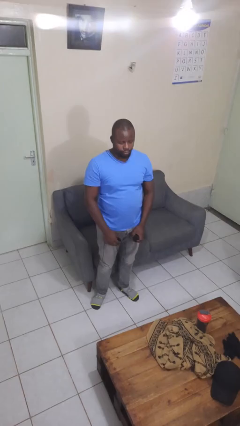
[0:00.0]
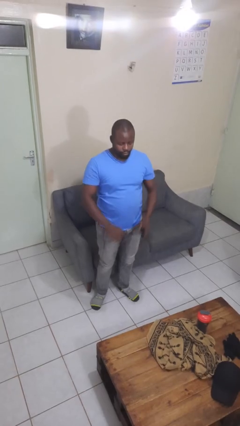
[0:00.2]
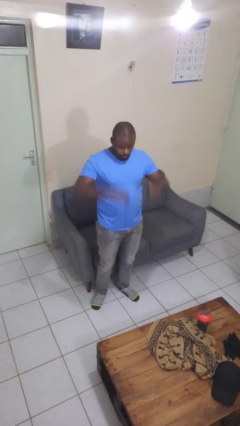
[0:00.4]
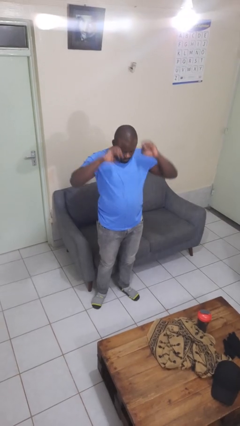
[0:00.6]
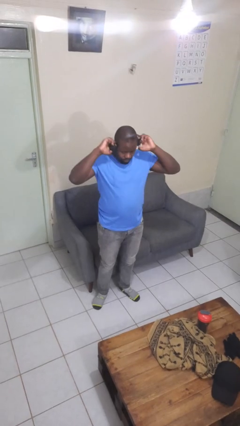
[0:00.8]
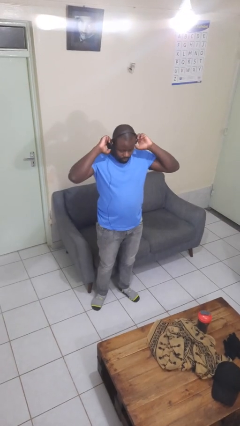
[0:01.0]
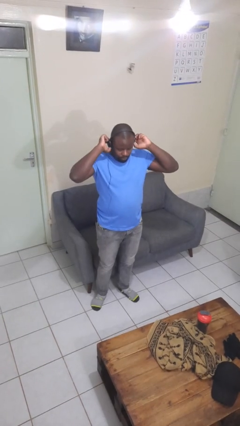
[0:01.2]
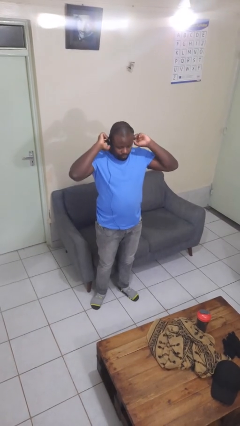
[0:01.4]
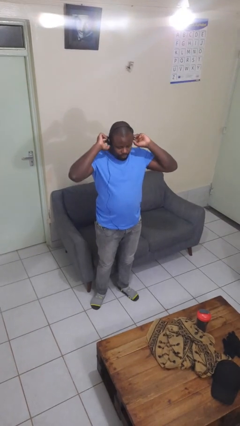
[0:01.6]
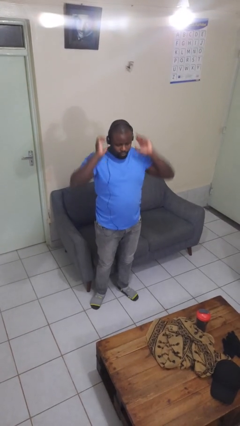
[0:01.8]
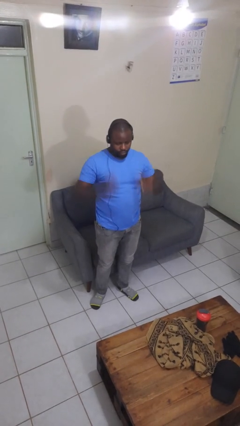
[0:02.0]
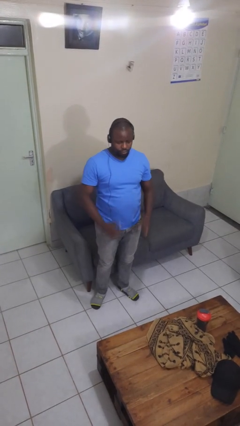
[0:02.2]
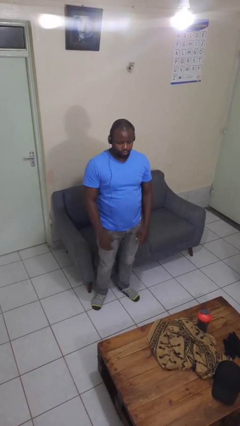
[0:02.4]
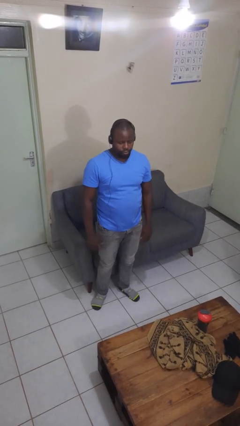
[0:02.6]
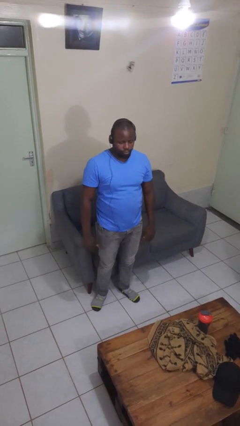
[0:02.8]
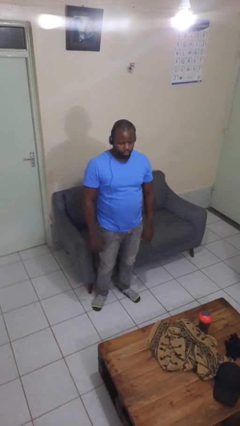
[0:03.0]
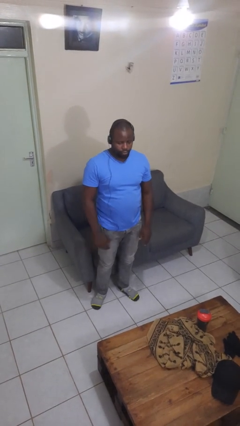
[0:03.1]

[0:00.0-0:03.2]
person puts on headphones

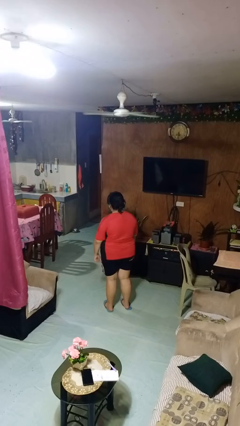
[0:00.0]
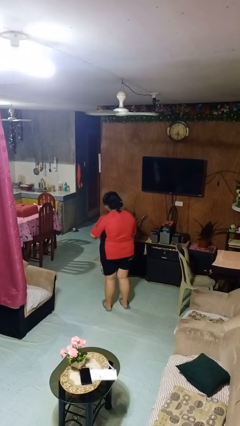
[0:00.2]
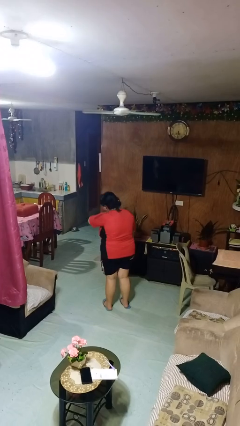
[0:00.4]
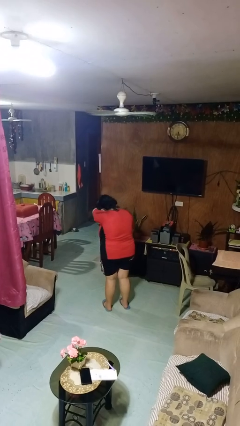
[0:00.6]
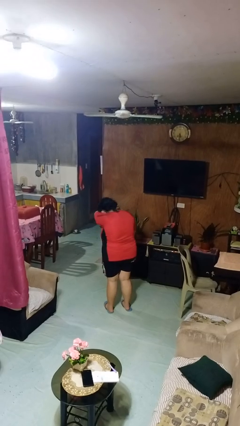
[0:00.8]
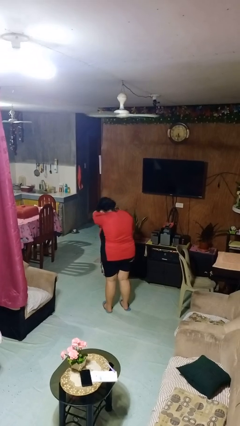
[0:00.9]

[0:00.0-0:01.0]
person sneezes into arm

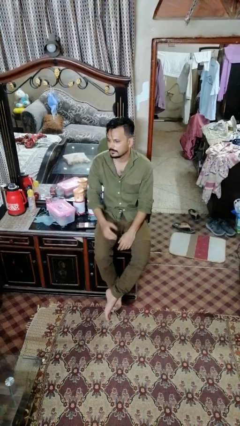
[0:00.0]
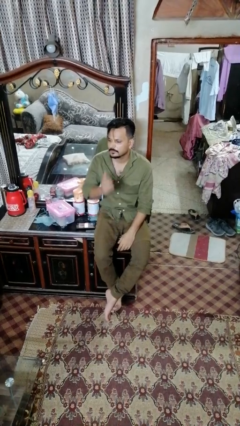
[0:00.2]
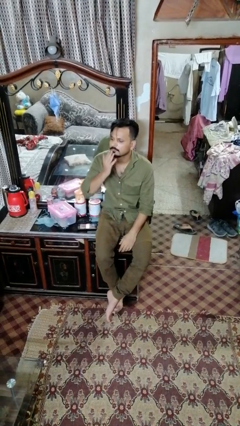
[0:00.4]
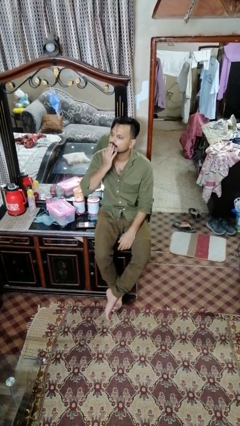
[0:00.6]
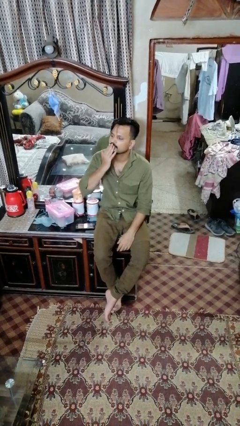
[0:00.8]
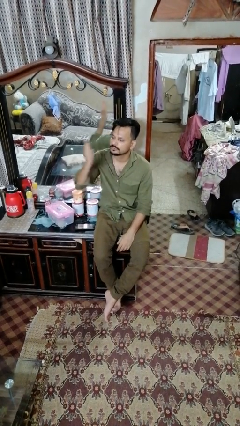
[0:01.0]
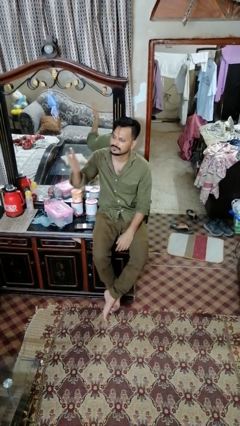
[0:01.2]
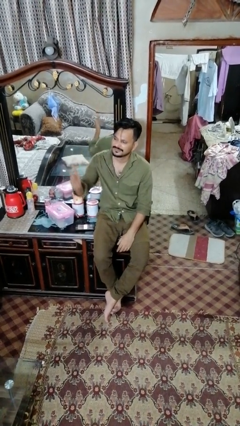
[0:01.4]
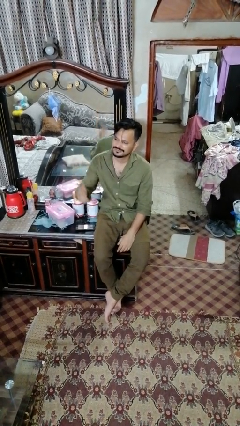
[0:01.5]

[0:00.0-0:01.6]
person gestures blow kiss

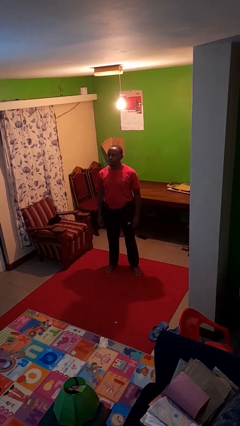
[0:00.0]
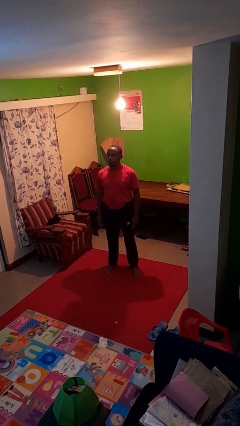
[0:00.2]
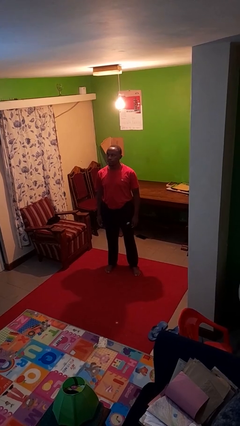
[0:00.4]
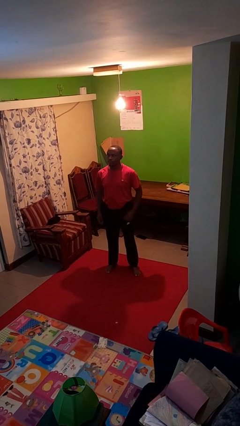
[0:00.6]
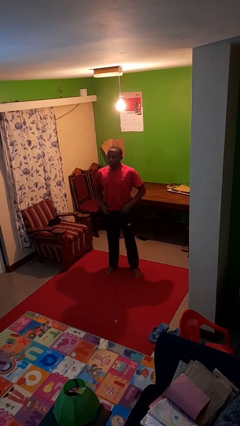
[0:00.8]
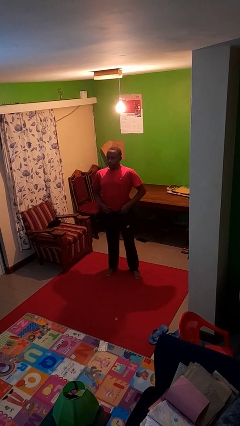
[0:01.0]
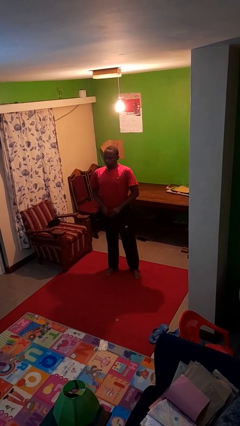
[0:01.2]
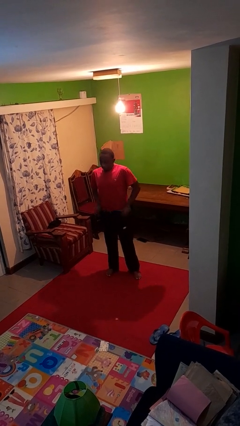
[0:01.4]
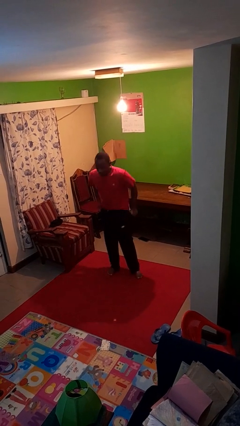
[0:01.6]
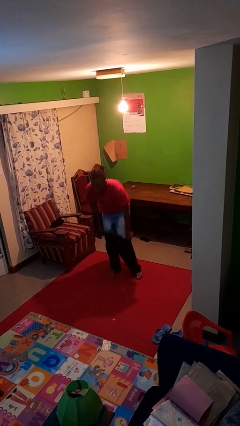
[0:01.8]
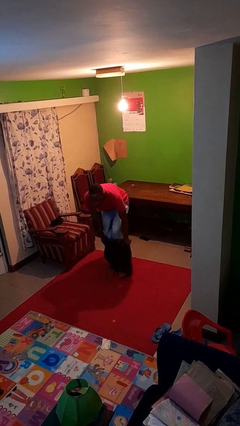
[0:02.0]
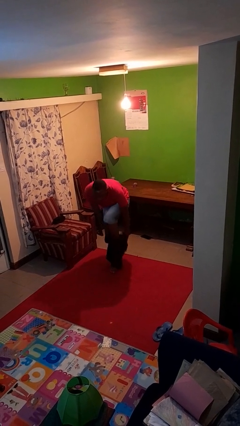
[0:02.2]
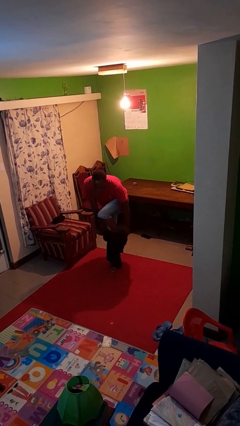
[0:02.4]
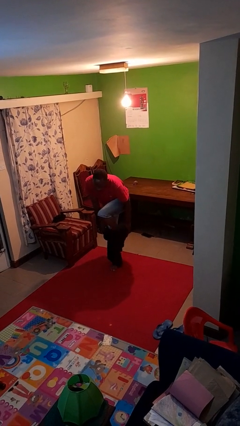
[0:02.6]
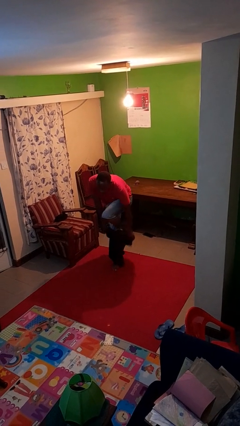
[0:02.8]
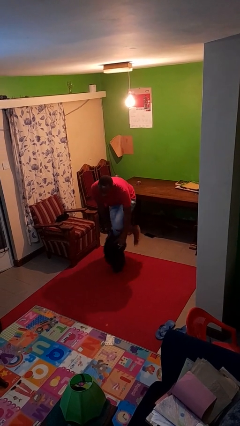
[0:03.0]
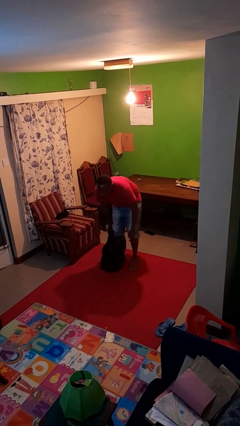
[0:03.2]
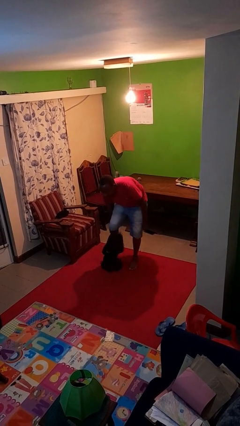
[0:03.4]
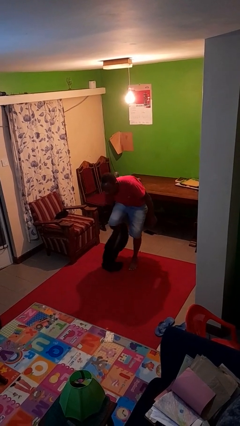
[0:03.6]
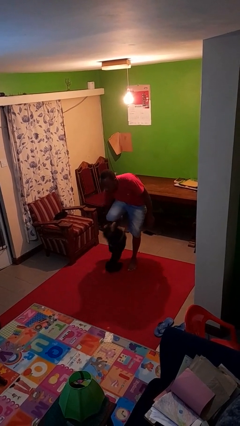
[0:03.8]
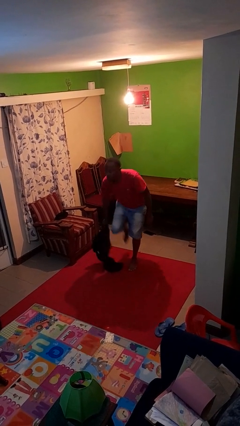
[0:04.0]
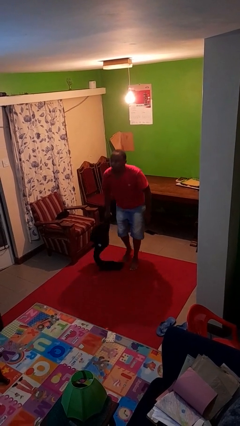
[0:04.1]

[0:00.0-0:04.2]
person takes off pants

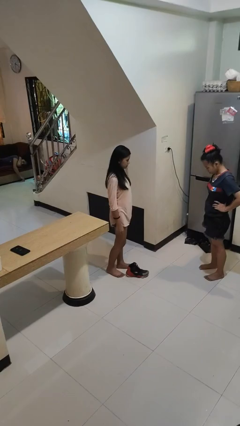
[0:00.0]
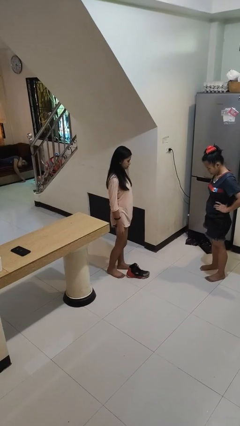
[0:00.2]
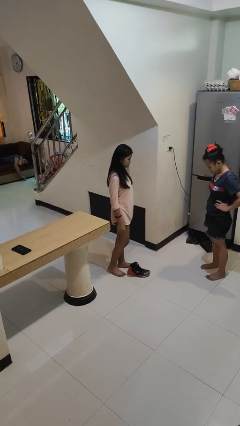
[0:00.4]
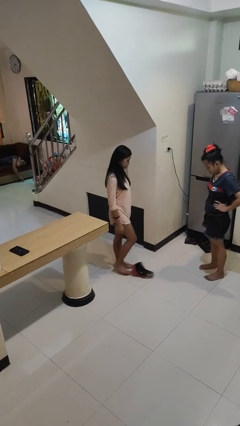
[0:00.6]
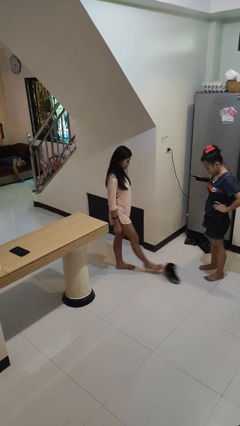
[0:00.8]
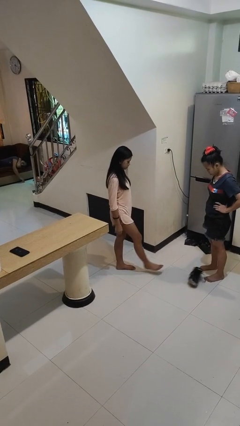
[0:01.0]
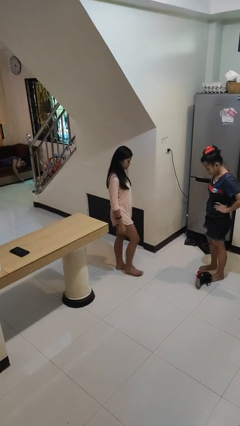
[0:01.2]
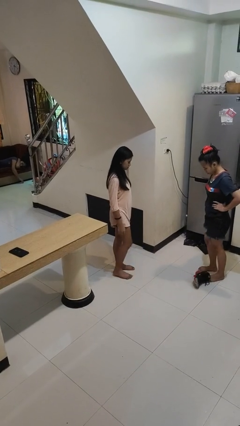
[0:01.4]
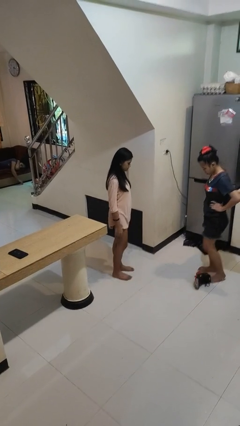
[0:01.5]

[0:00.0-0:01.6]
person kicks object to person

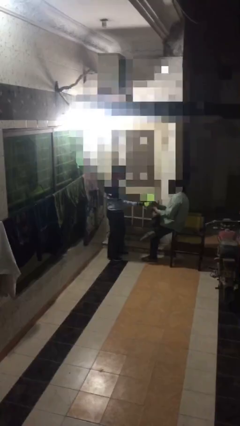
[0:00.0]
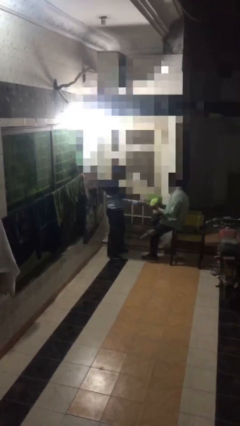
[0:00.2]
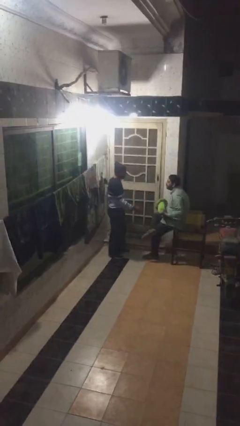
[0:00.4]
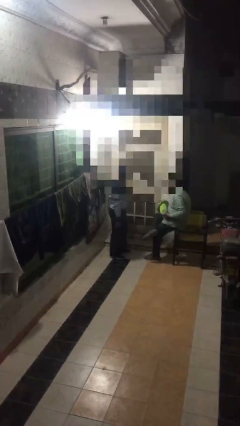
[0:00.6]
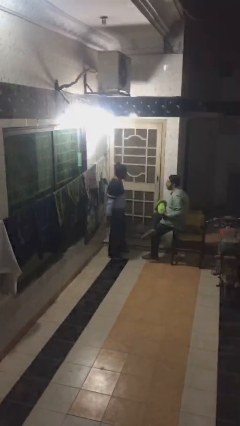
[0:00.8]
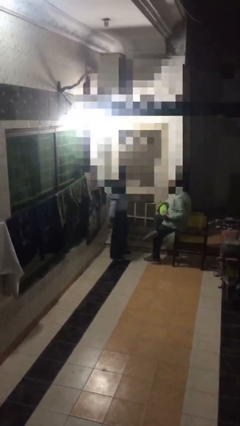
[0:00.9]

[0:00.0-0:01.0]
person transfers object to person

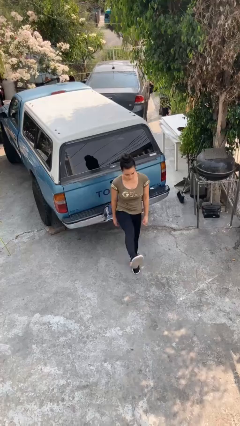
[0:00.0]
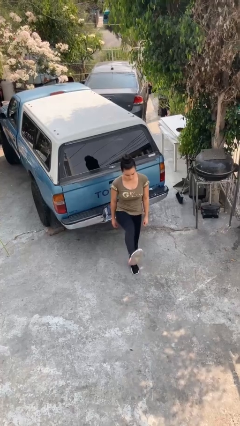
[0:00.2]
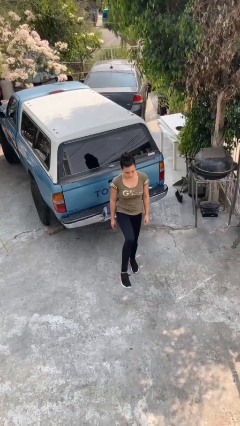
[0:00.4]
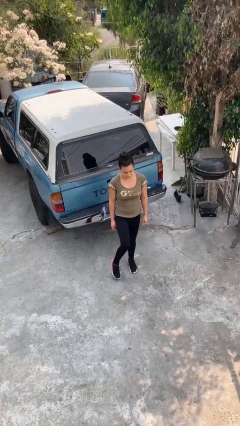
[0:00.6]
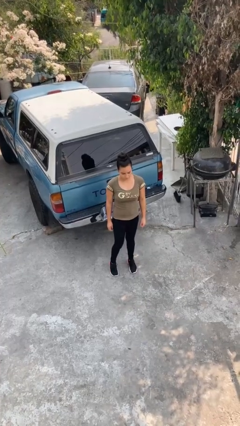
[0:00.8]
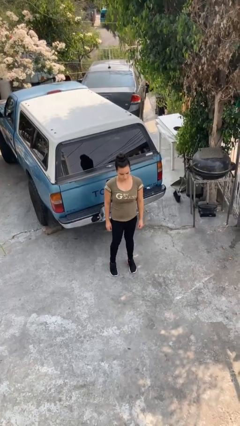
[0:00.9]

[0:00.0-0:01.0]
person karate kicks

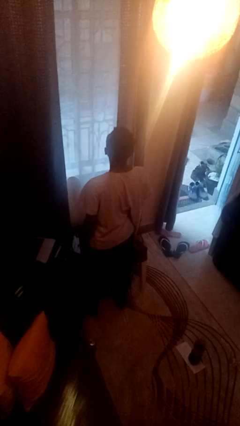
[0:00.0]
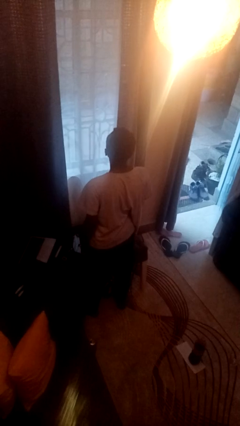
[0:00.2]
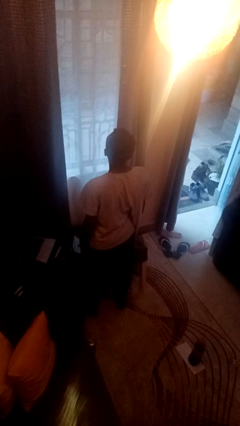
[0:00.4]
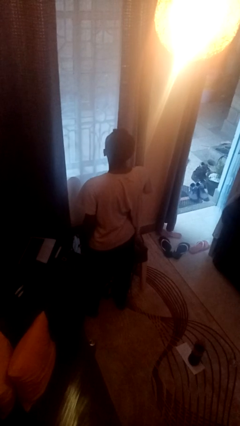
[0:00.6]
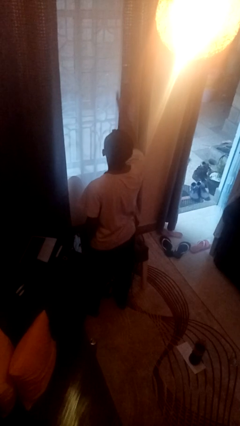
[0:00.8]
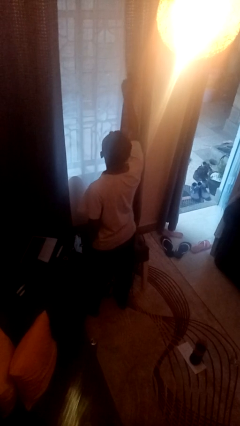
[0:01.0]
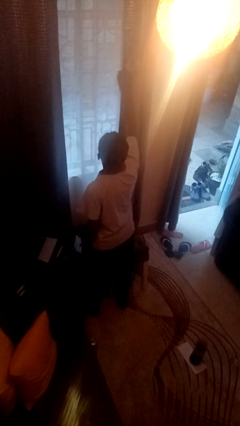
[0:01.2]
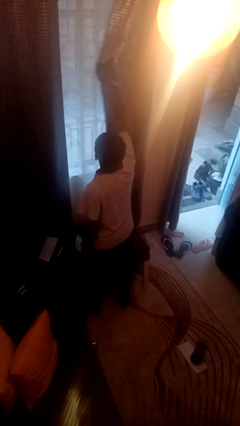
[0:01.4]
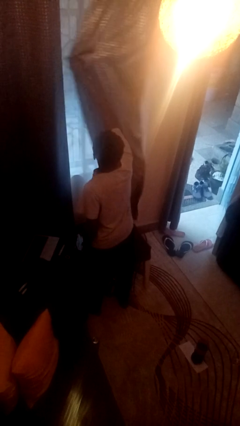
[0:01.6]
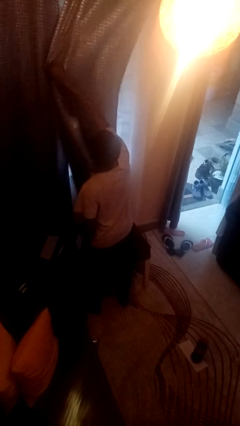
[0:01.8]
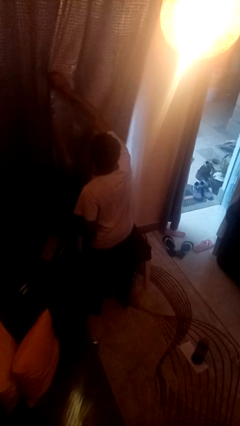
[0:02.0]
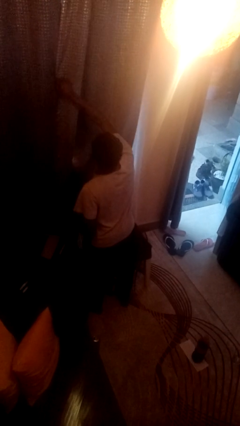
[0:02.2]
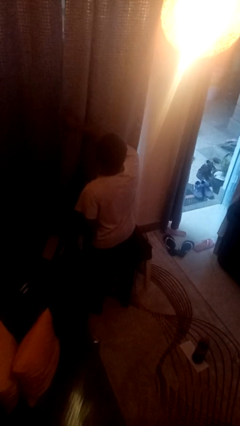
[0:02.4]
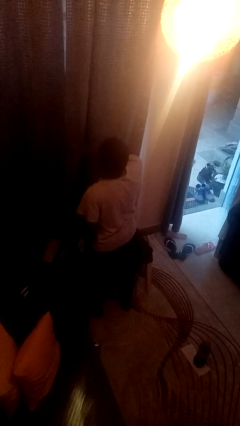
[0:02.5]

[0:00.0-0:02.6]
person closes curtains

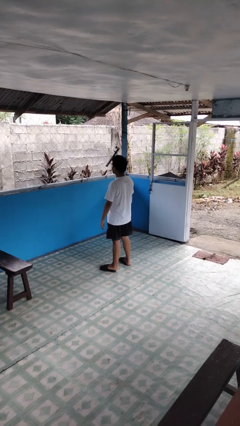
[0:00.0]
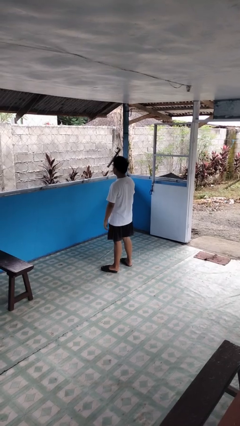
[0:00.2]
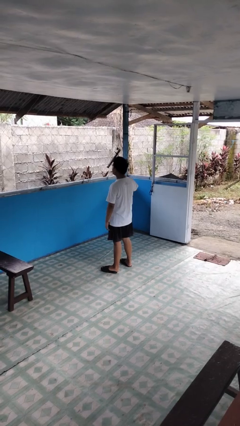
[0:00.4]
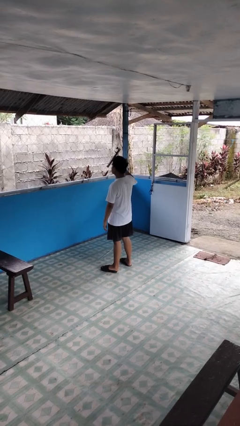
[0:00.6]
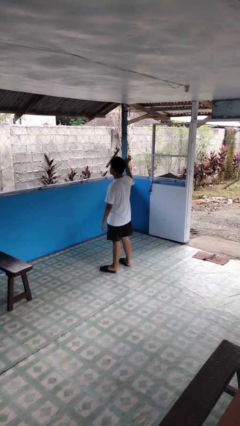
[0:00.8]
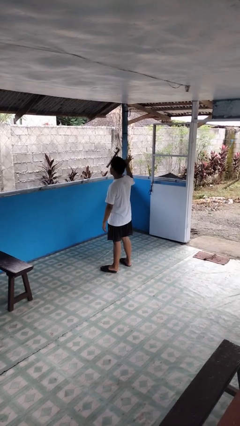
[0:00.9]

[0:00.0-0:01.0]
person gestures number five
